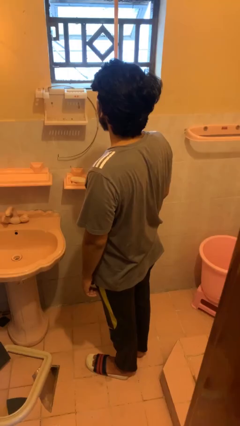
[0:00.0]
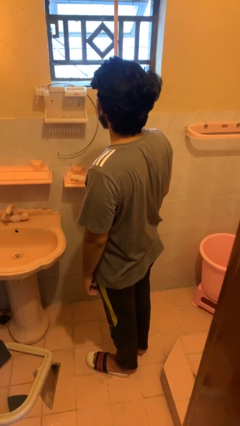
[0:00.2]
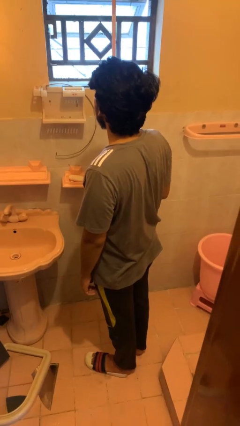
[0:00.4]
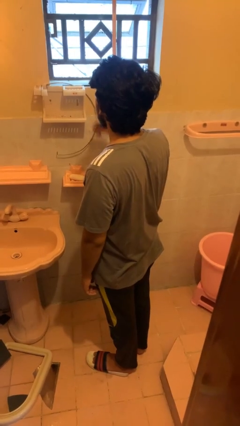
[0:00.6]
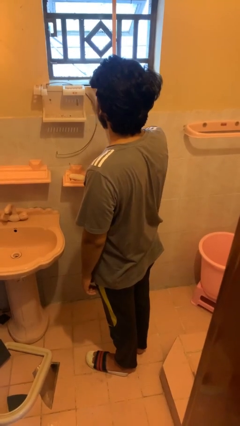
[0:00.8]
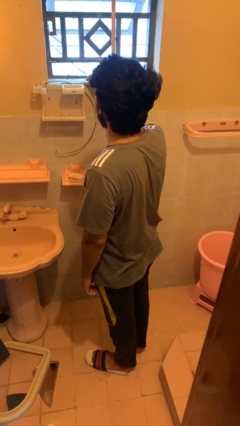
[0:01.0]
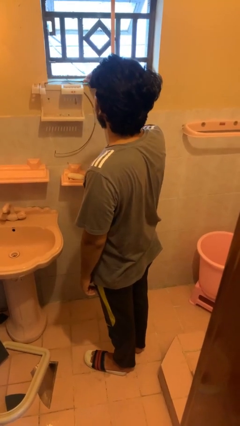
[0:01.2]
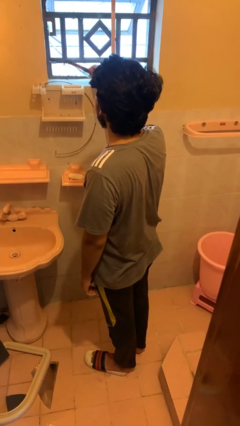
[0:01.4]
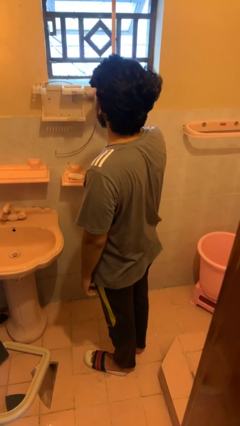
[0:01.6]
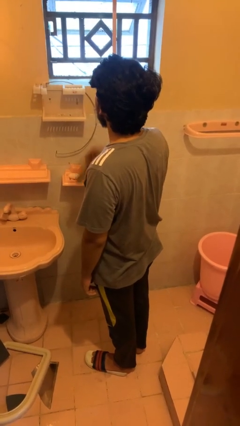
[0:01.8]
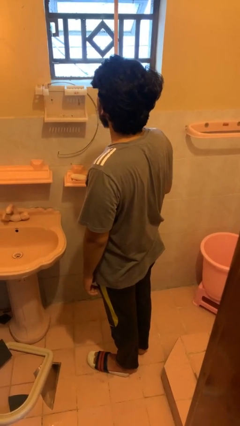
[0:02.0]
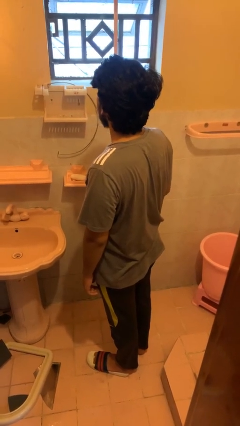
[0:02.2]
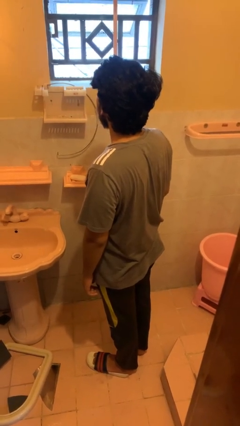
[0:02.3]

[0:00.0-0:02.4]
person picks up object from countertop

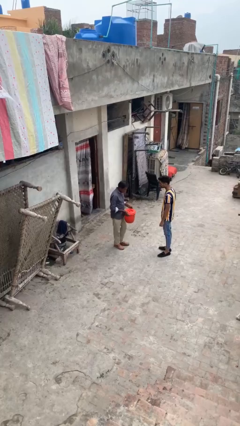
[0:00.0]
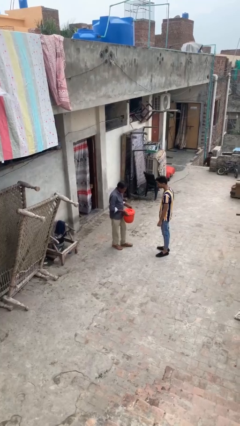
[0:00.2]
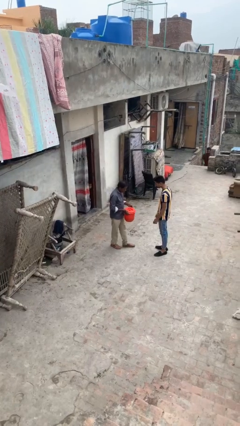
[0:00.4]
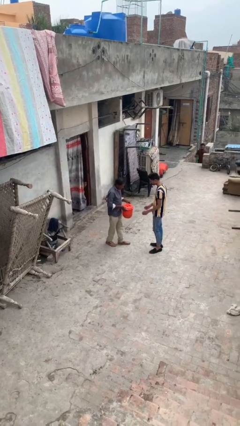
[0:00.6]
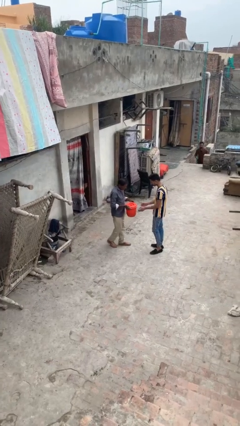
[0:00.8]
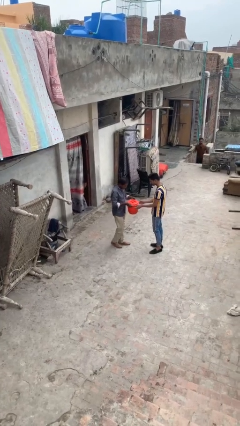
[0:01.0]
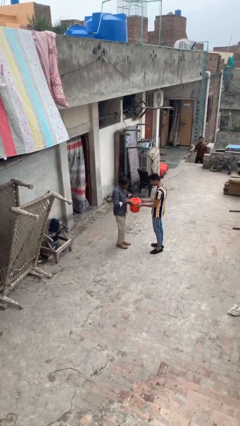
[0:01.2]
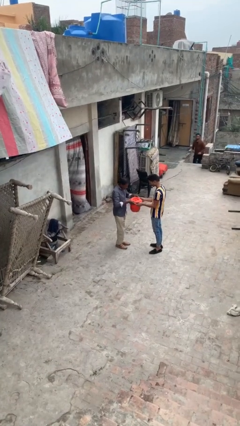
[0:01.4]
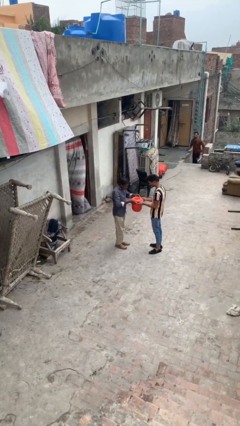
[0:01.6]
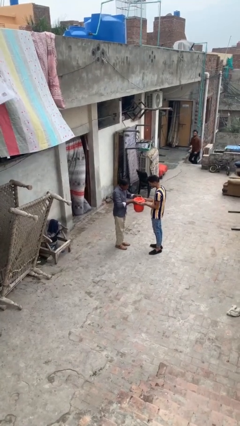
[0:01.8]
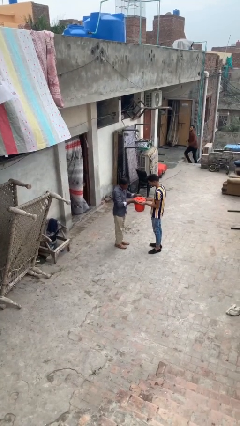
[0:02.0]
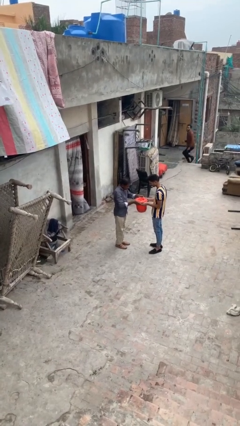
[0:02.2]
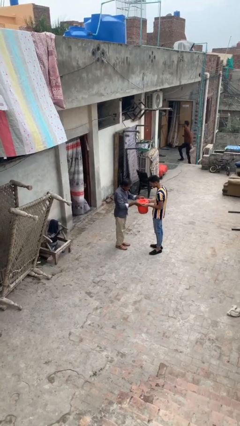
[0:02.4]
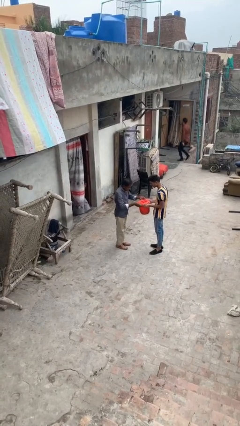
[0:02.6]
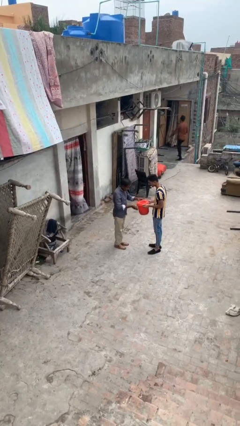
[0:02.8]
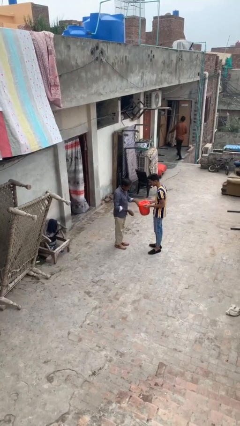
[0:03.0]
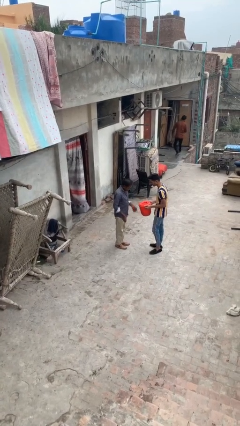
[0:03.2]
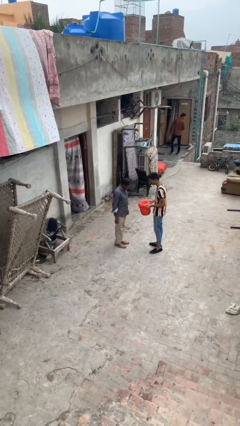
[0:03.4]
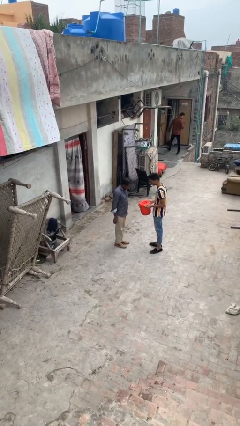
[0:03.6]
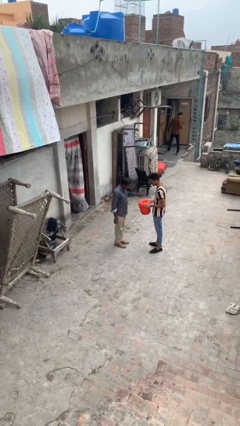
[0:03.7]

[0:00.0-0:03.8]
person transfers object to person

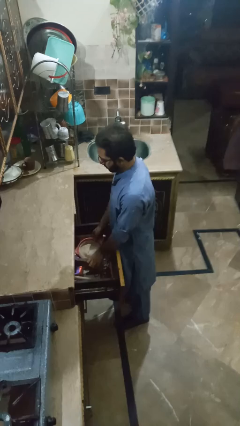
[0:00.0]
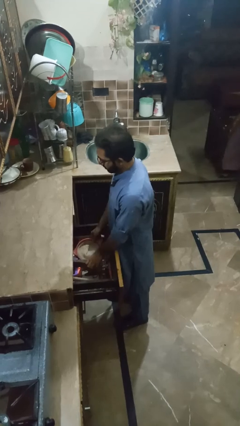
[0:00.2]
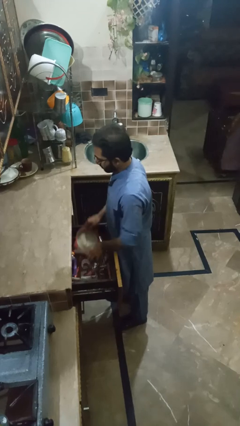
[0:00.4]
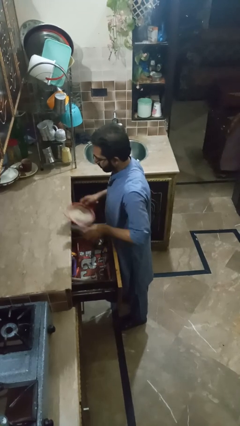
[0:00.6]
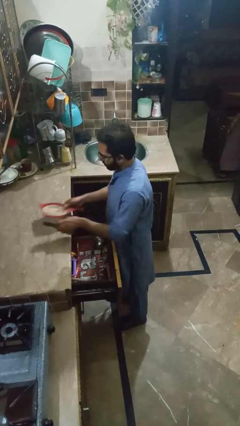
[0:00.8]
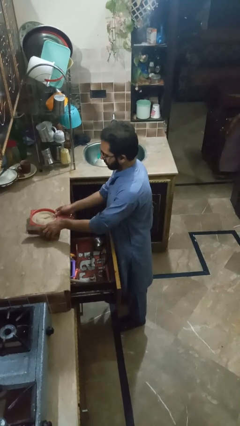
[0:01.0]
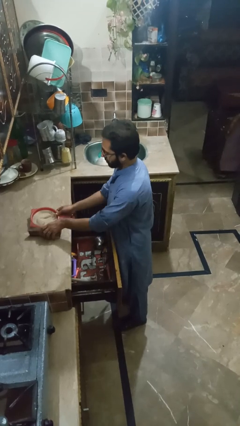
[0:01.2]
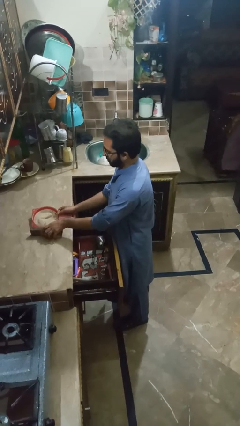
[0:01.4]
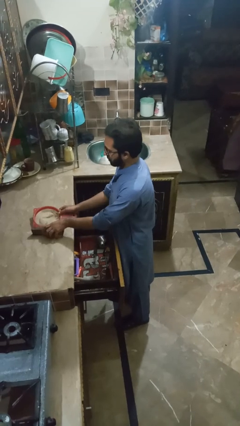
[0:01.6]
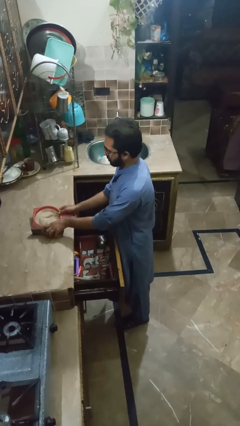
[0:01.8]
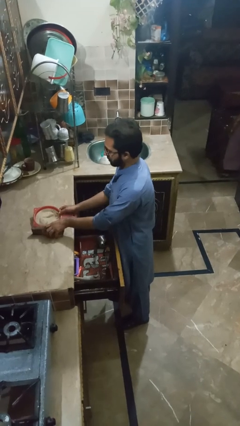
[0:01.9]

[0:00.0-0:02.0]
person puts object into kitchen drawer

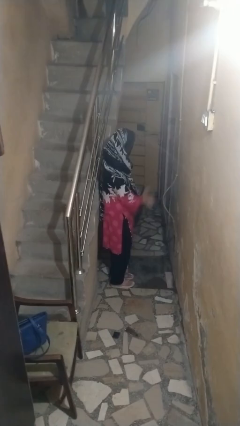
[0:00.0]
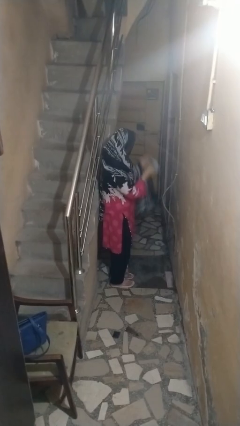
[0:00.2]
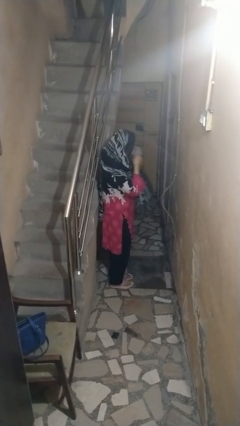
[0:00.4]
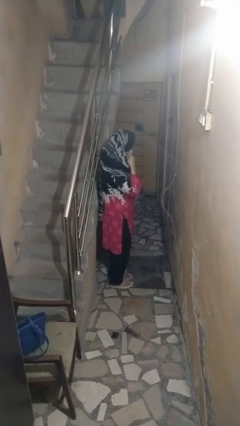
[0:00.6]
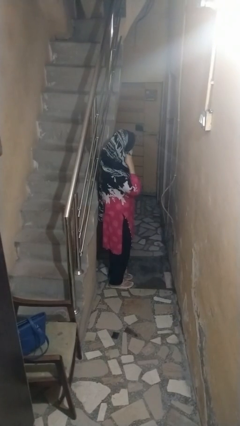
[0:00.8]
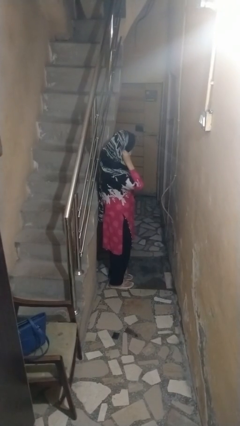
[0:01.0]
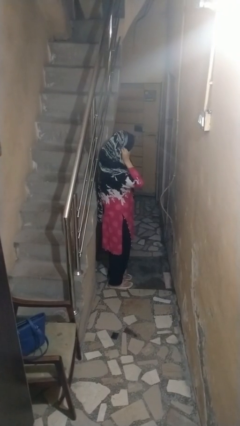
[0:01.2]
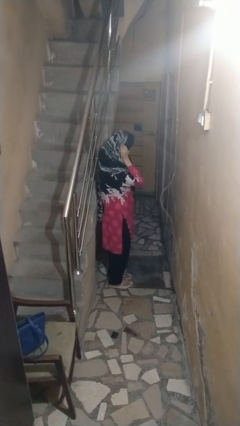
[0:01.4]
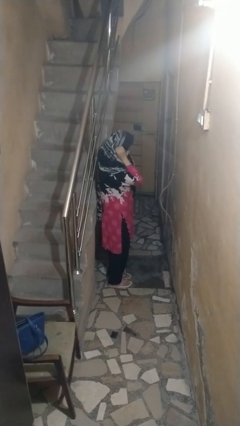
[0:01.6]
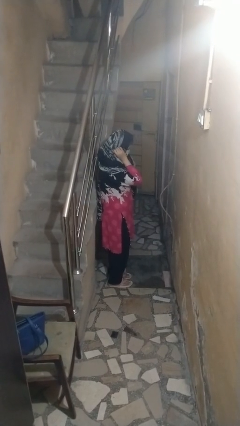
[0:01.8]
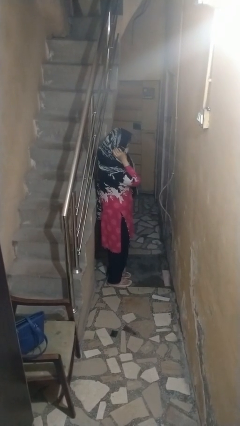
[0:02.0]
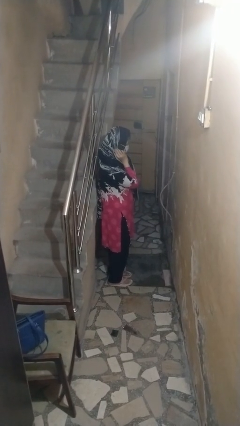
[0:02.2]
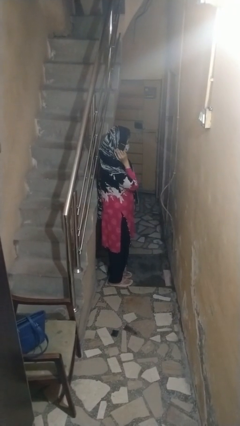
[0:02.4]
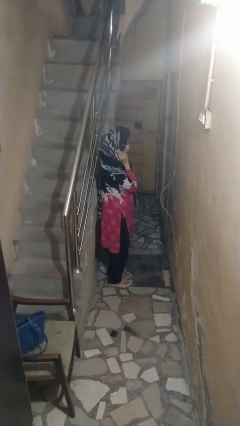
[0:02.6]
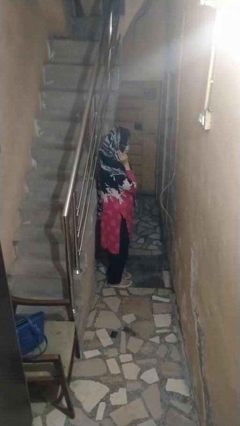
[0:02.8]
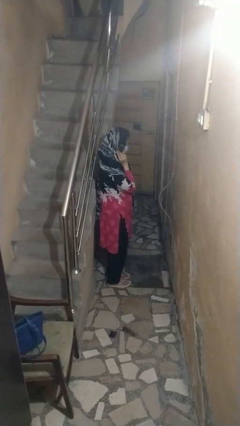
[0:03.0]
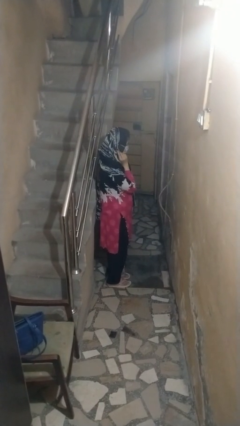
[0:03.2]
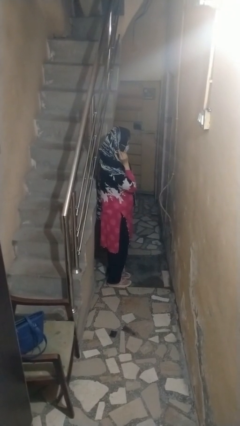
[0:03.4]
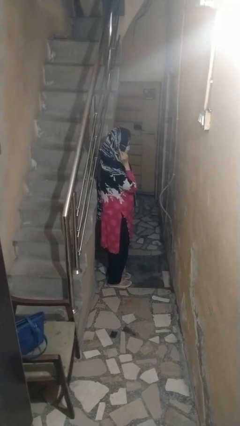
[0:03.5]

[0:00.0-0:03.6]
person puts on facemask

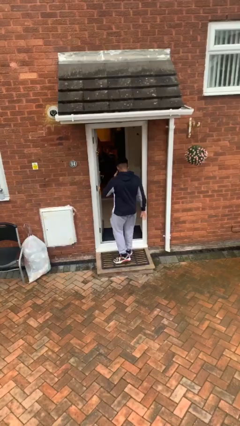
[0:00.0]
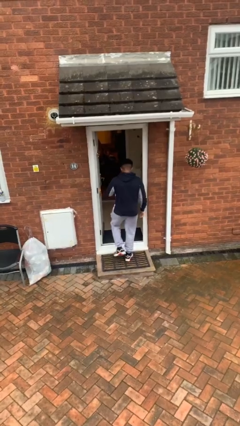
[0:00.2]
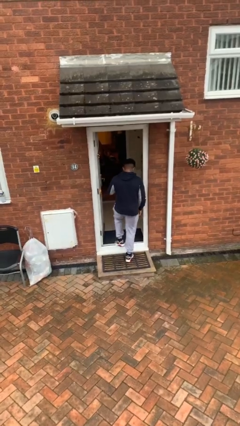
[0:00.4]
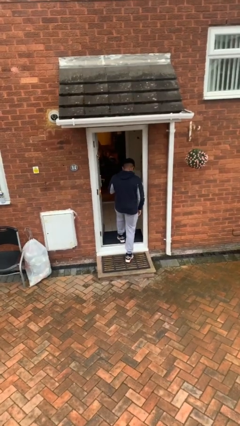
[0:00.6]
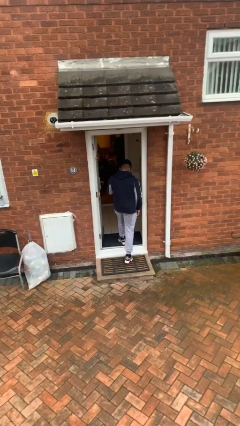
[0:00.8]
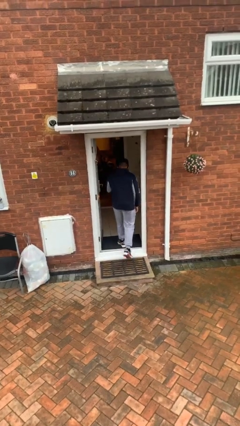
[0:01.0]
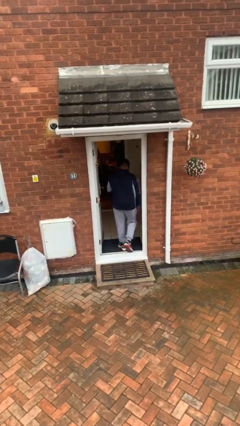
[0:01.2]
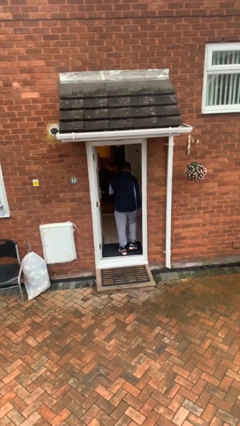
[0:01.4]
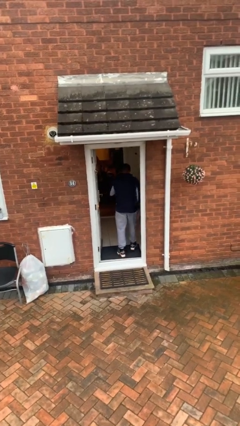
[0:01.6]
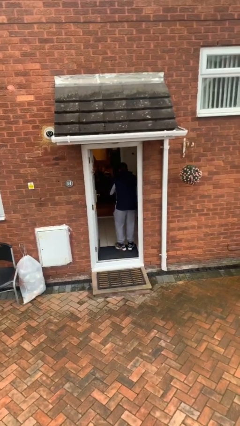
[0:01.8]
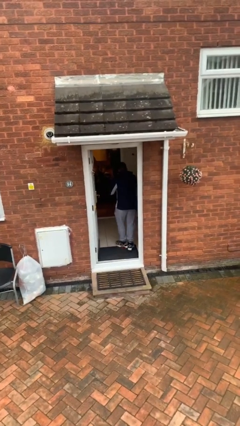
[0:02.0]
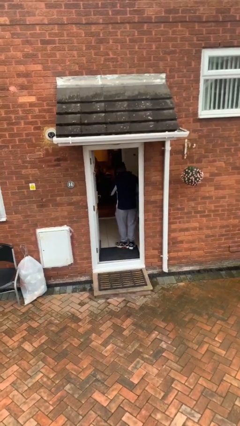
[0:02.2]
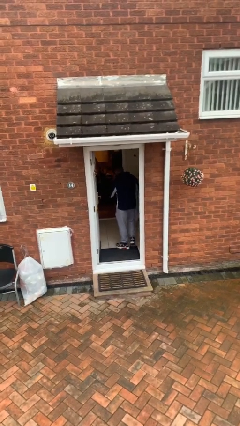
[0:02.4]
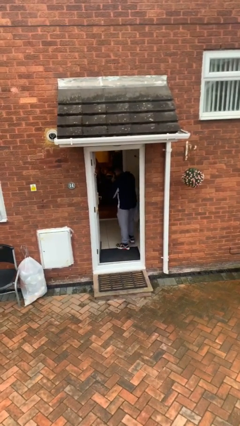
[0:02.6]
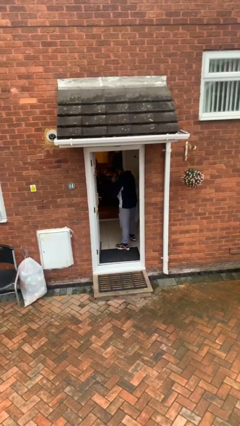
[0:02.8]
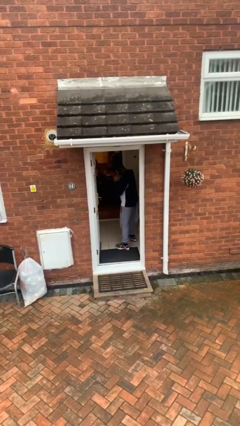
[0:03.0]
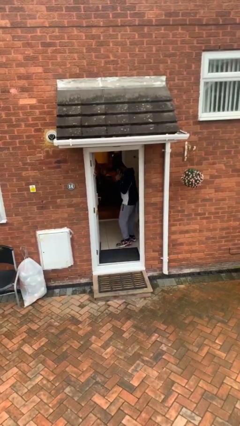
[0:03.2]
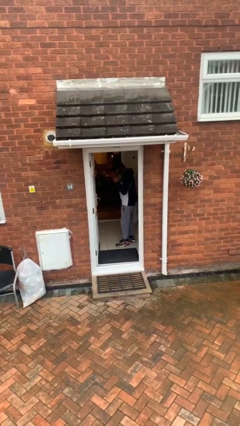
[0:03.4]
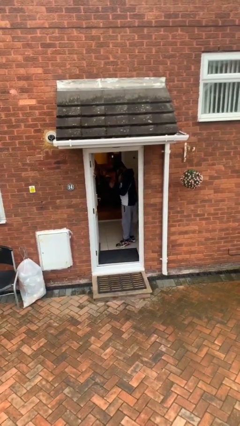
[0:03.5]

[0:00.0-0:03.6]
person exits scene through structure

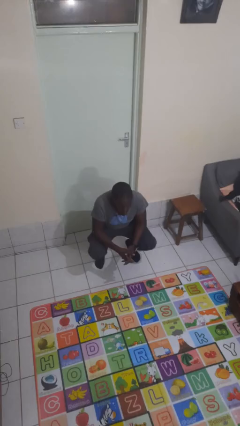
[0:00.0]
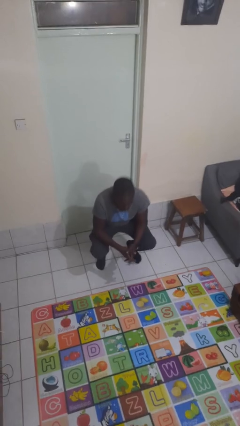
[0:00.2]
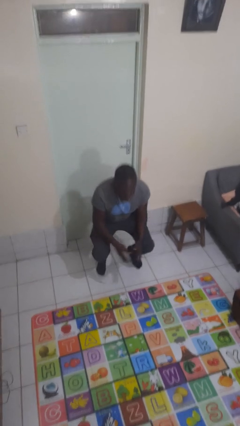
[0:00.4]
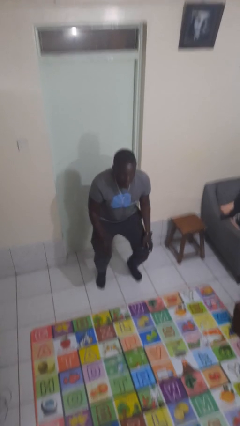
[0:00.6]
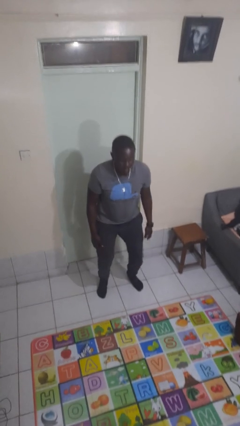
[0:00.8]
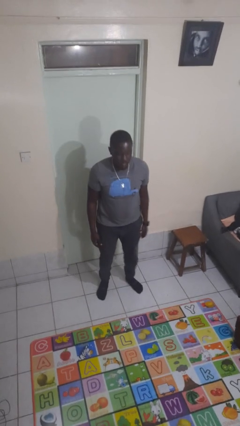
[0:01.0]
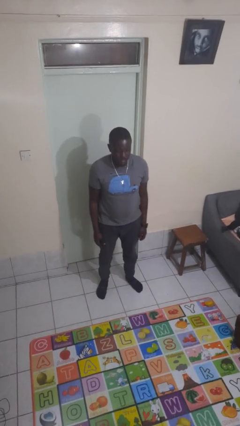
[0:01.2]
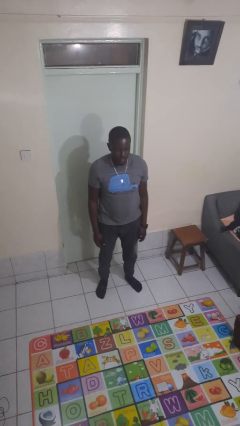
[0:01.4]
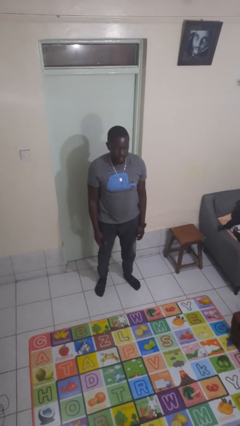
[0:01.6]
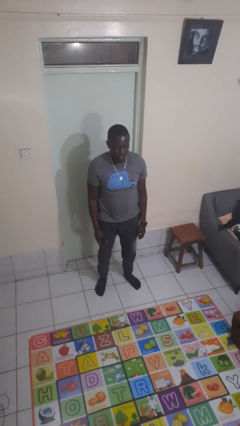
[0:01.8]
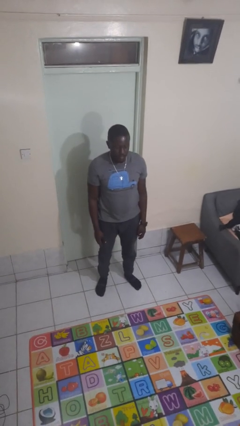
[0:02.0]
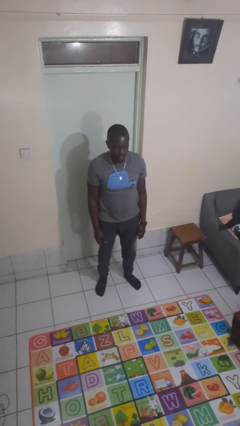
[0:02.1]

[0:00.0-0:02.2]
person stands up
